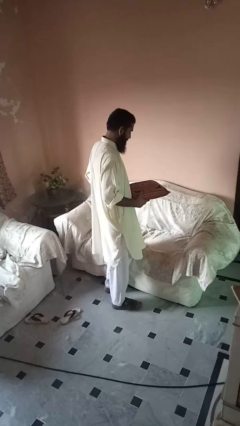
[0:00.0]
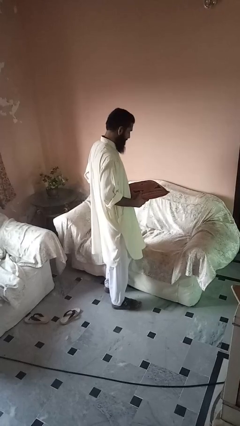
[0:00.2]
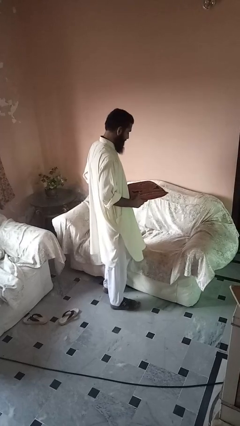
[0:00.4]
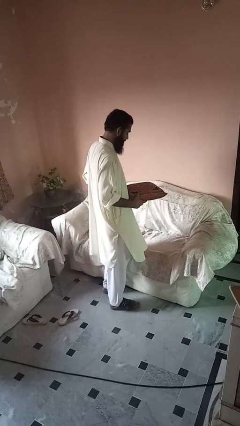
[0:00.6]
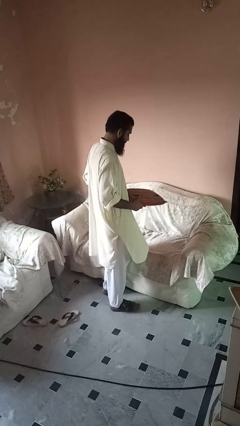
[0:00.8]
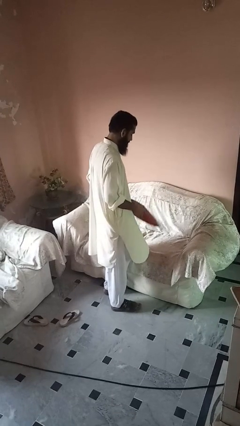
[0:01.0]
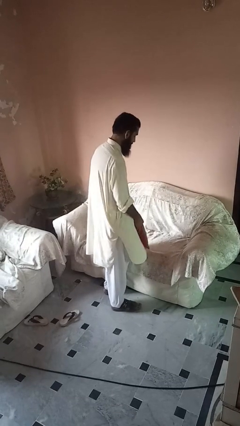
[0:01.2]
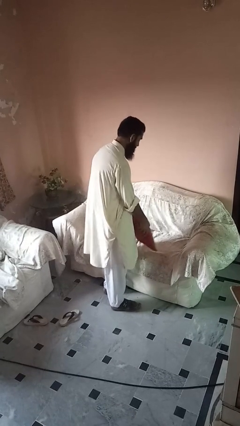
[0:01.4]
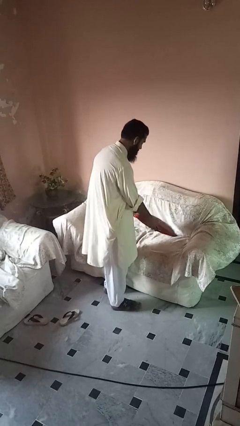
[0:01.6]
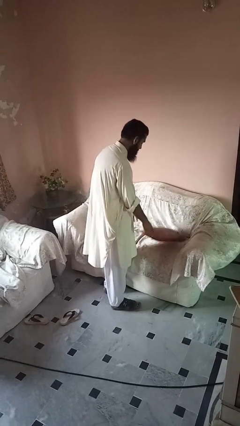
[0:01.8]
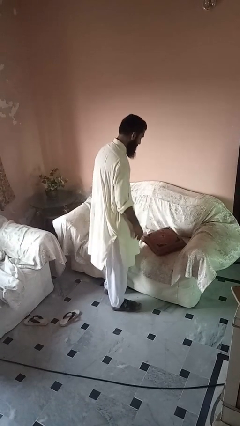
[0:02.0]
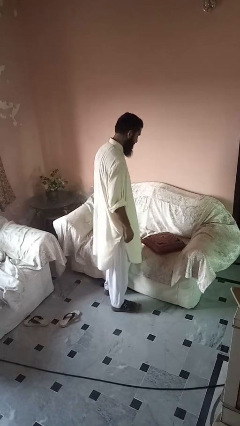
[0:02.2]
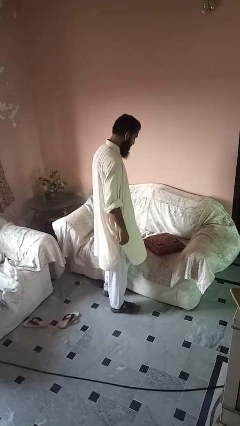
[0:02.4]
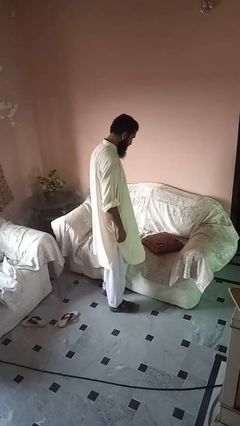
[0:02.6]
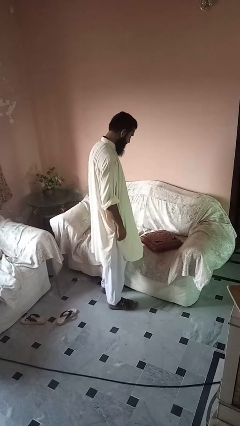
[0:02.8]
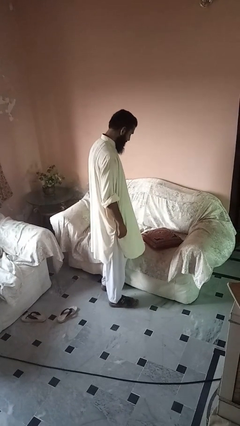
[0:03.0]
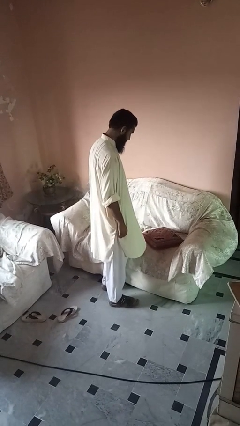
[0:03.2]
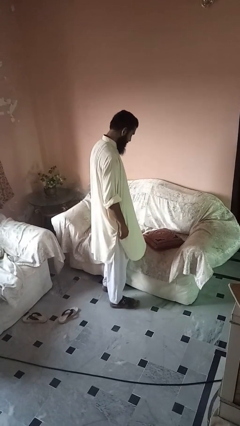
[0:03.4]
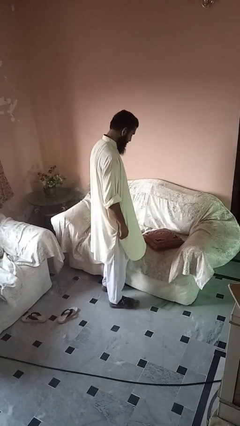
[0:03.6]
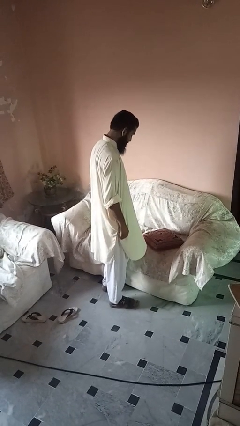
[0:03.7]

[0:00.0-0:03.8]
person puts down object on couch

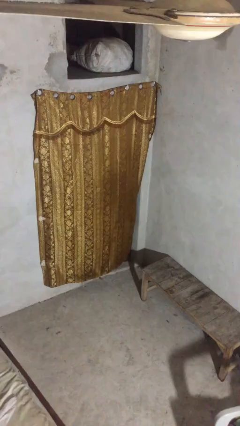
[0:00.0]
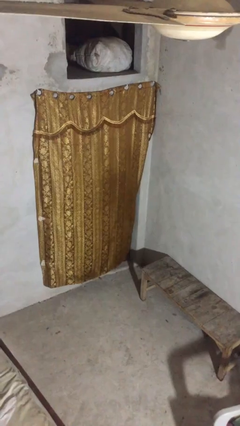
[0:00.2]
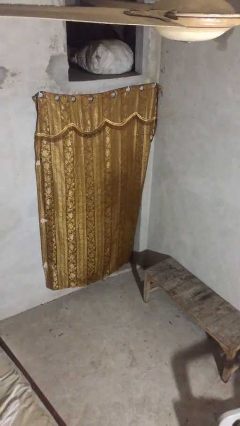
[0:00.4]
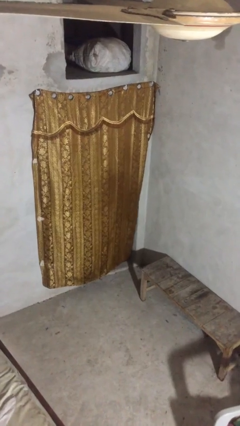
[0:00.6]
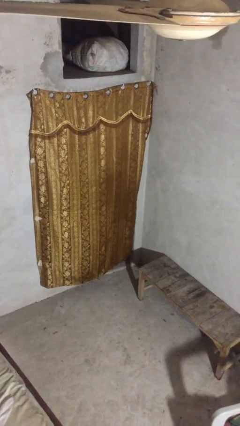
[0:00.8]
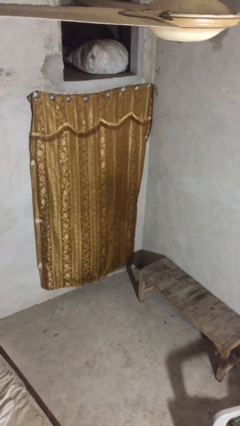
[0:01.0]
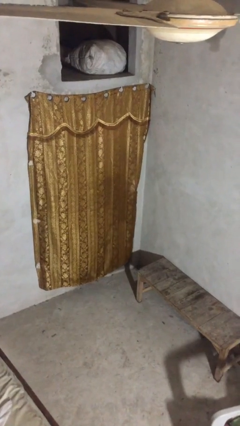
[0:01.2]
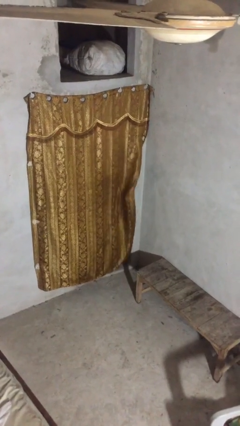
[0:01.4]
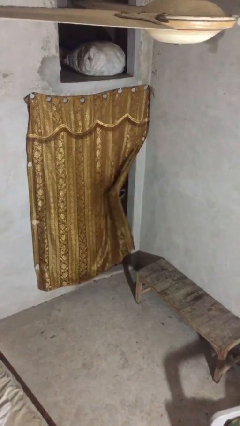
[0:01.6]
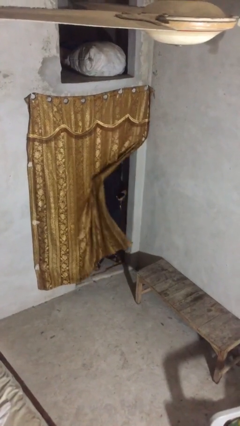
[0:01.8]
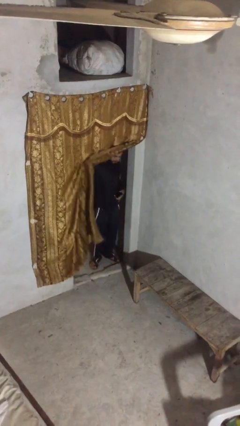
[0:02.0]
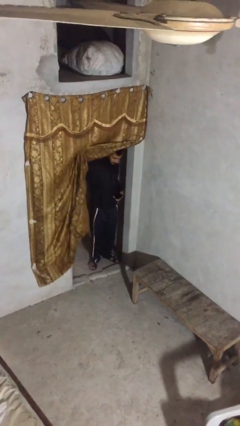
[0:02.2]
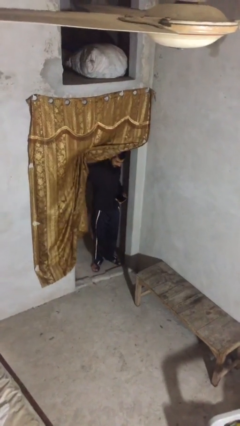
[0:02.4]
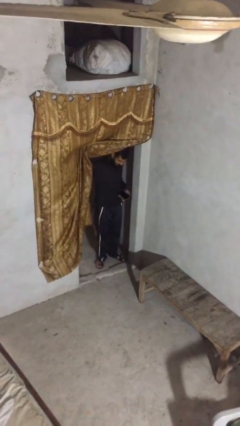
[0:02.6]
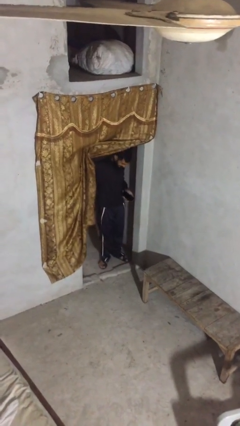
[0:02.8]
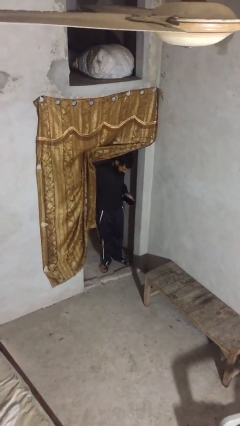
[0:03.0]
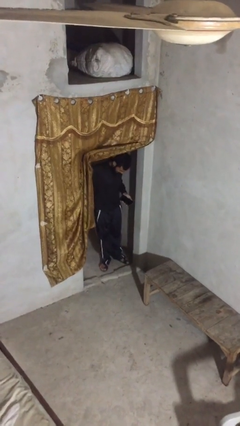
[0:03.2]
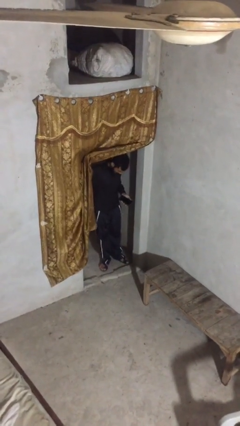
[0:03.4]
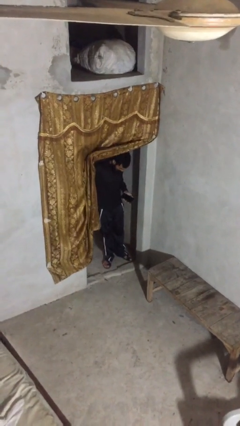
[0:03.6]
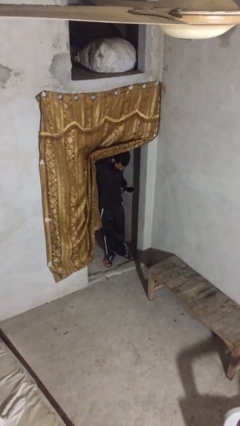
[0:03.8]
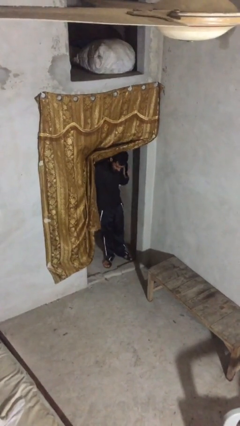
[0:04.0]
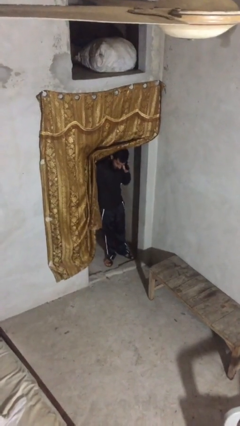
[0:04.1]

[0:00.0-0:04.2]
person opens facility door

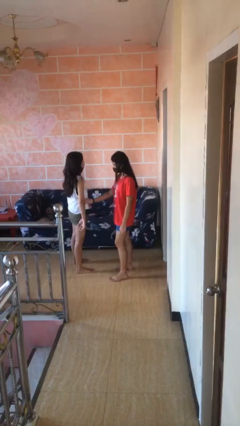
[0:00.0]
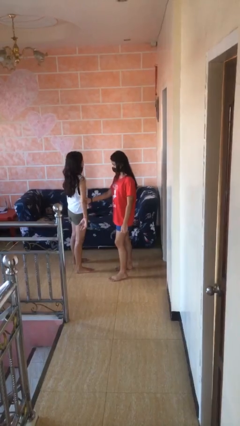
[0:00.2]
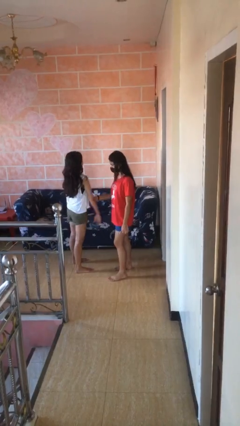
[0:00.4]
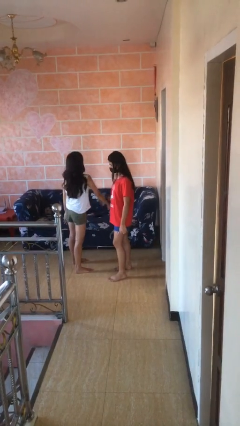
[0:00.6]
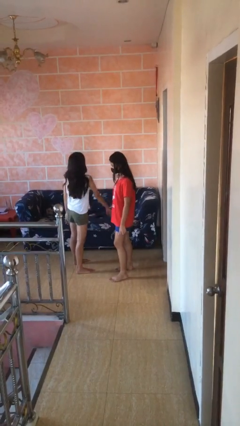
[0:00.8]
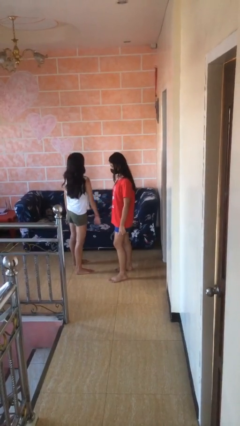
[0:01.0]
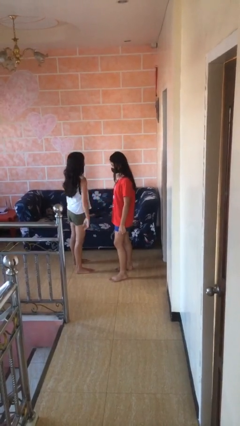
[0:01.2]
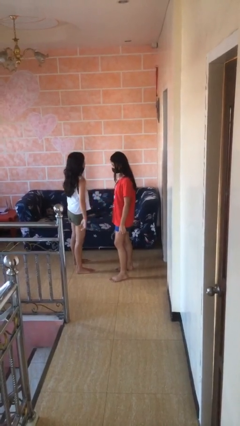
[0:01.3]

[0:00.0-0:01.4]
person grabs person by forearm

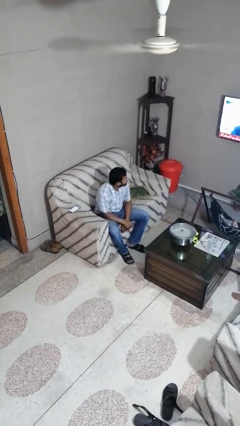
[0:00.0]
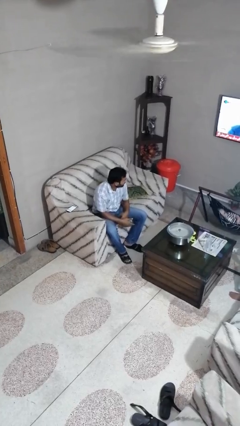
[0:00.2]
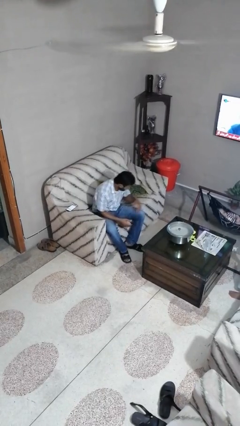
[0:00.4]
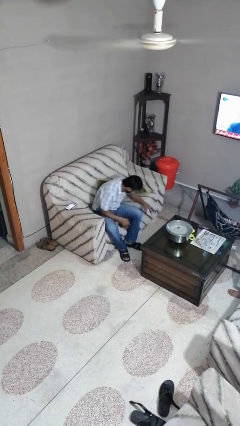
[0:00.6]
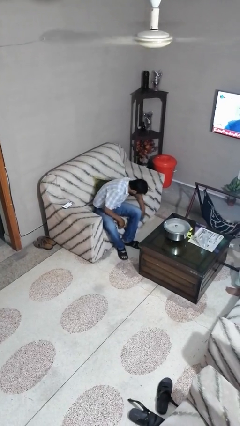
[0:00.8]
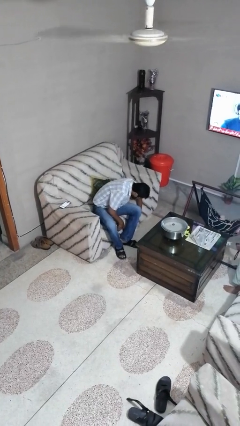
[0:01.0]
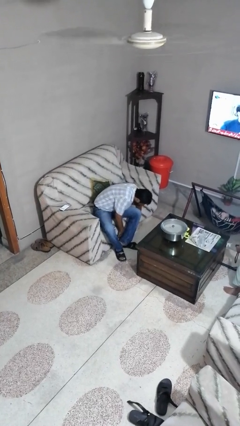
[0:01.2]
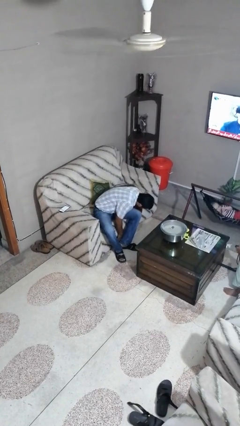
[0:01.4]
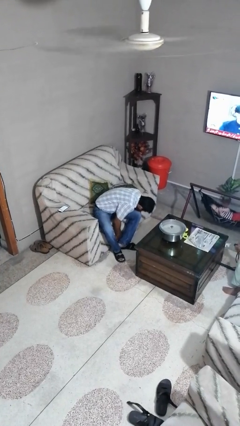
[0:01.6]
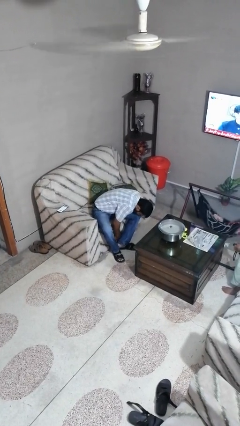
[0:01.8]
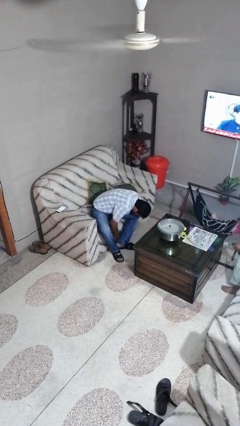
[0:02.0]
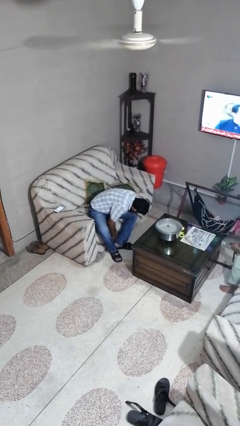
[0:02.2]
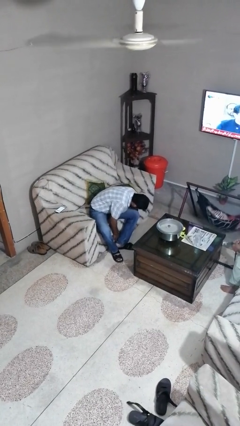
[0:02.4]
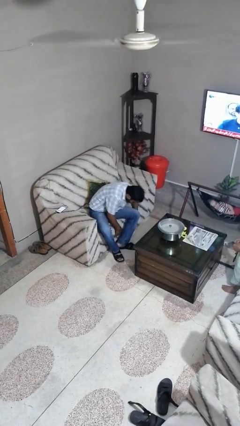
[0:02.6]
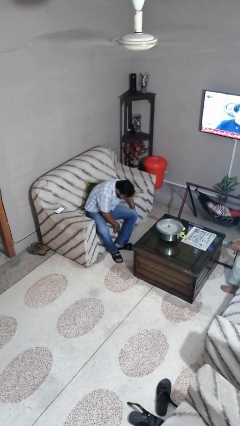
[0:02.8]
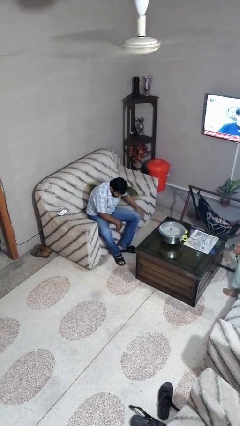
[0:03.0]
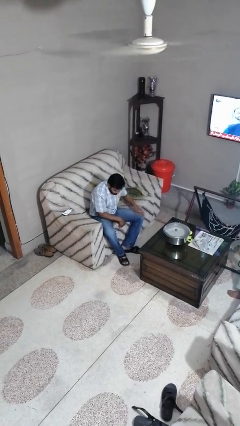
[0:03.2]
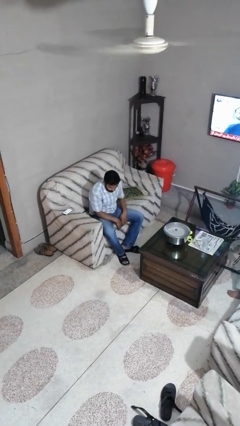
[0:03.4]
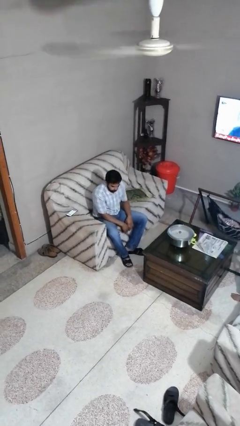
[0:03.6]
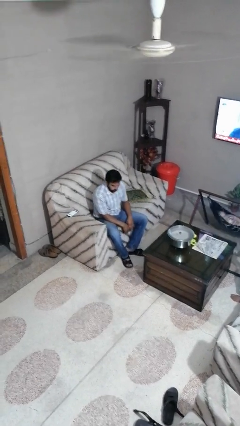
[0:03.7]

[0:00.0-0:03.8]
person searches under couch

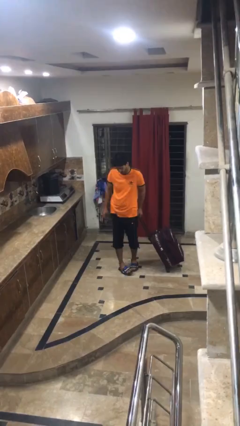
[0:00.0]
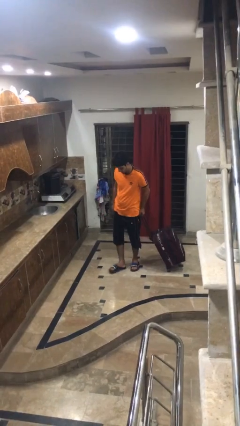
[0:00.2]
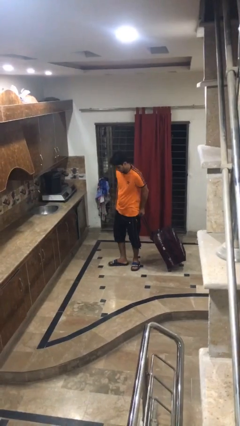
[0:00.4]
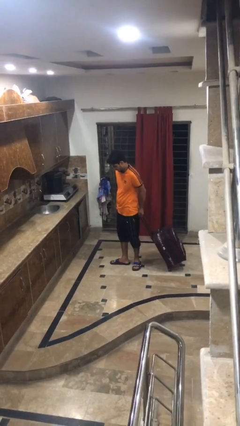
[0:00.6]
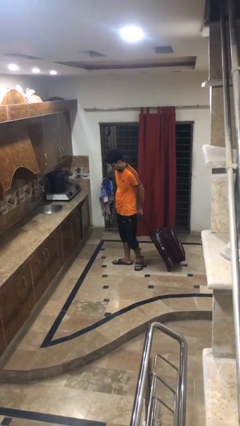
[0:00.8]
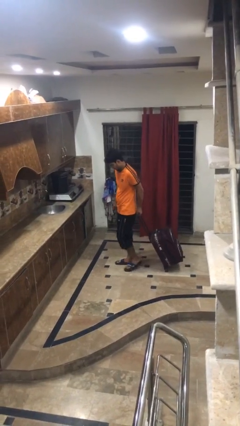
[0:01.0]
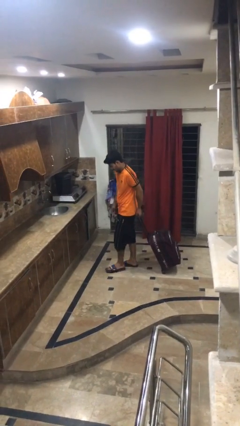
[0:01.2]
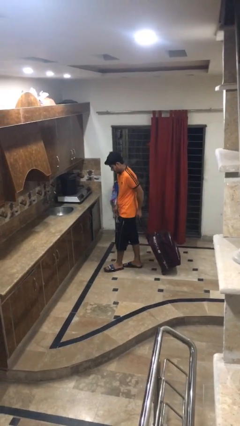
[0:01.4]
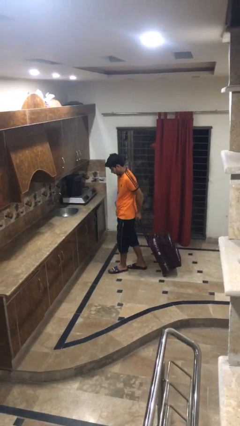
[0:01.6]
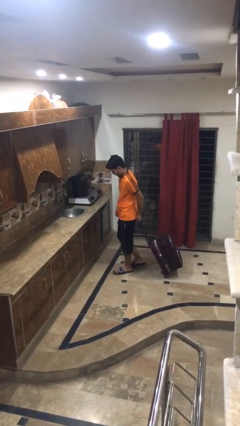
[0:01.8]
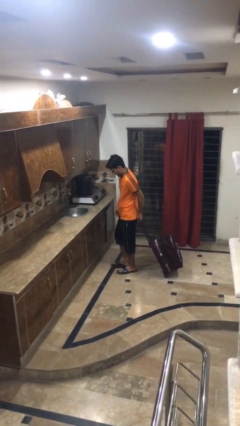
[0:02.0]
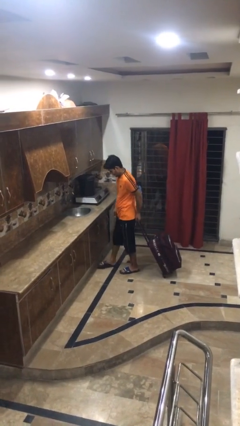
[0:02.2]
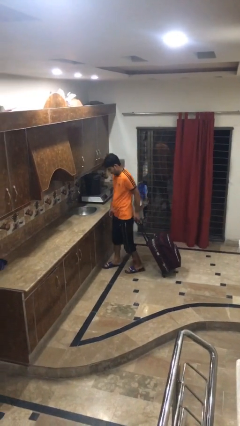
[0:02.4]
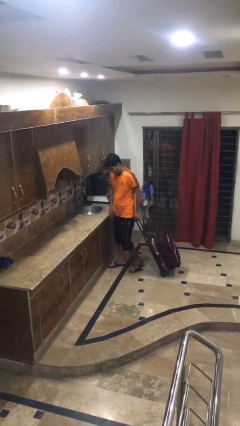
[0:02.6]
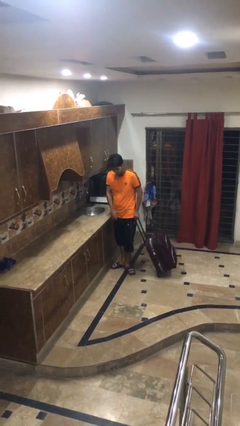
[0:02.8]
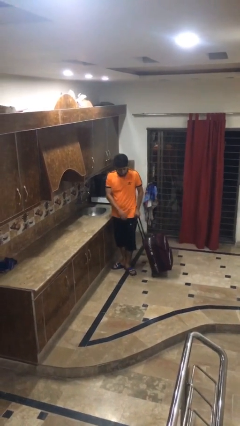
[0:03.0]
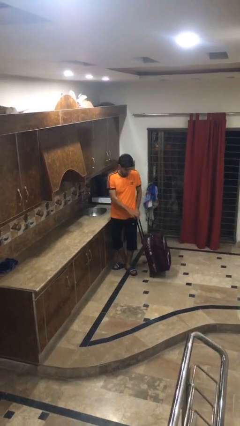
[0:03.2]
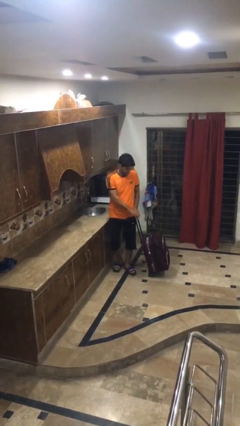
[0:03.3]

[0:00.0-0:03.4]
person pulls wheeled cart

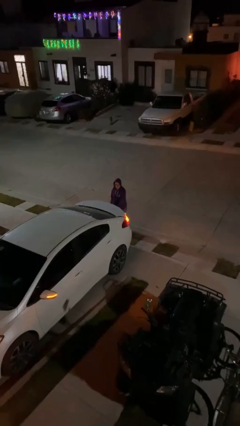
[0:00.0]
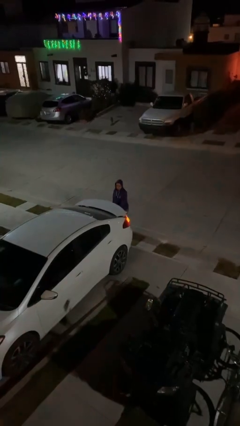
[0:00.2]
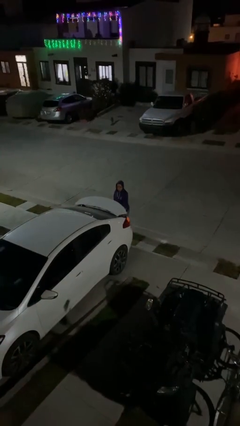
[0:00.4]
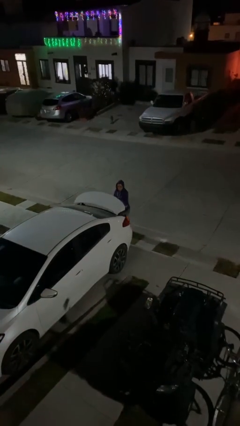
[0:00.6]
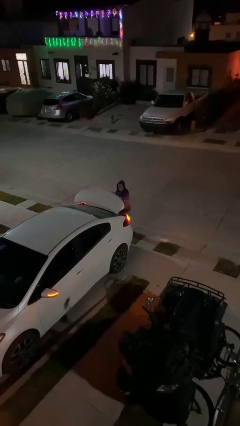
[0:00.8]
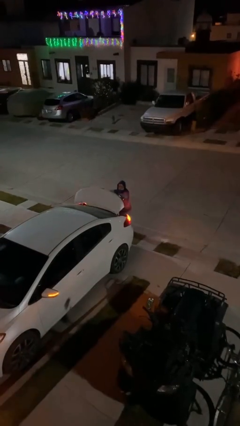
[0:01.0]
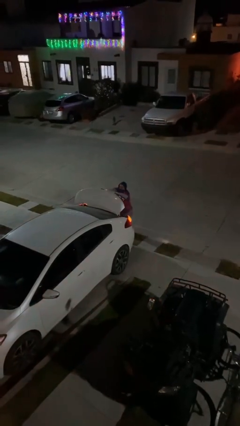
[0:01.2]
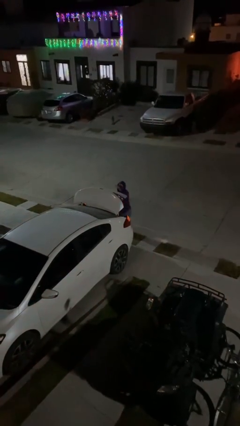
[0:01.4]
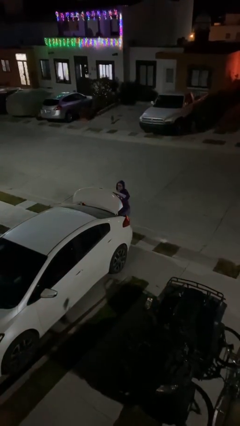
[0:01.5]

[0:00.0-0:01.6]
person opens car trunk
